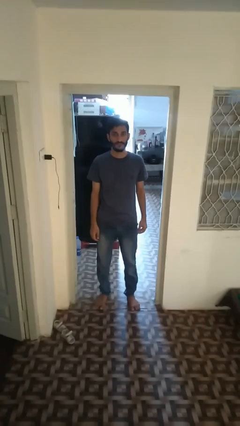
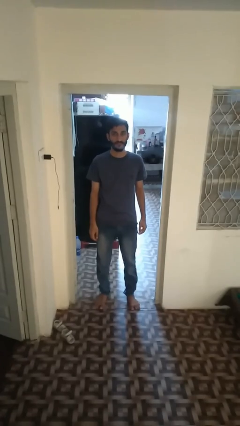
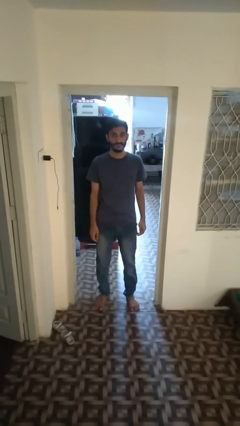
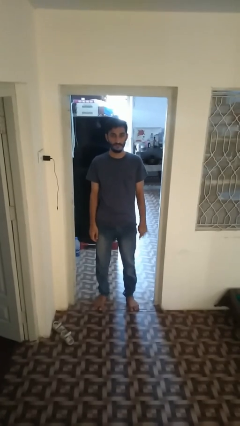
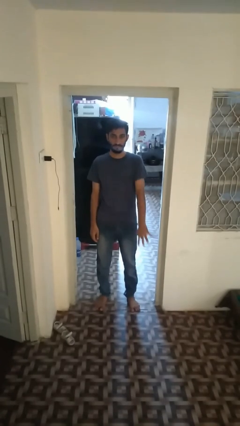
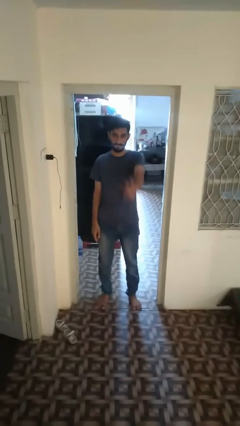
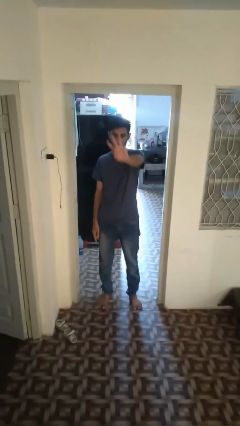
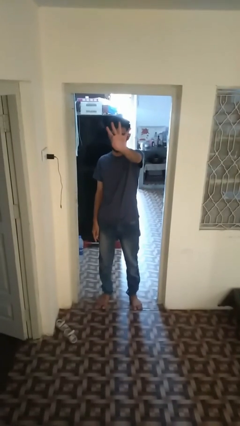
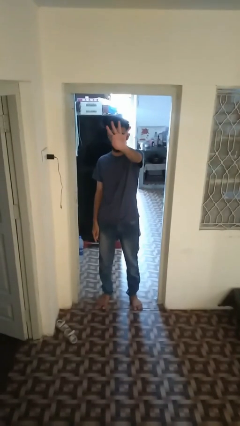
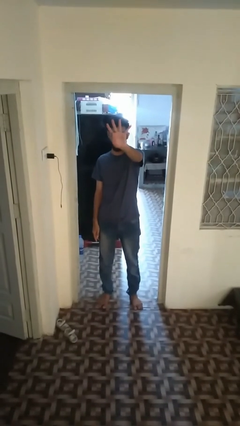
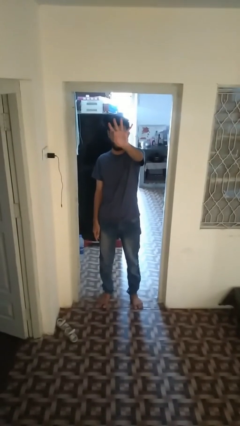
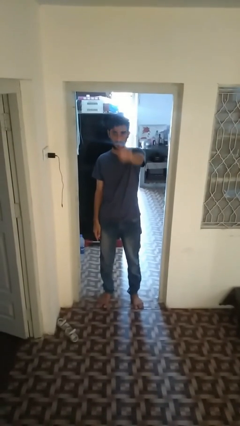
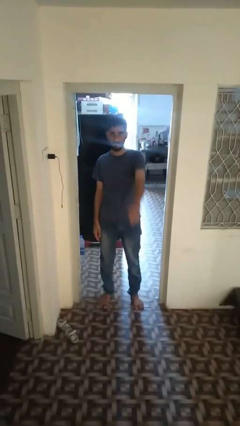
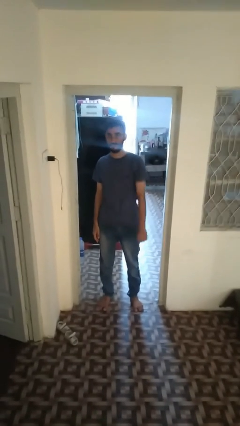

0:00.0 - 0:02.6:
person gestures number four

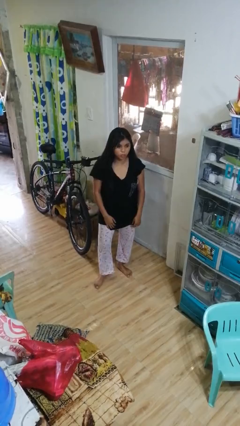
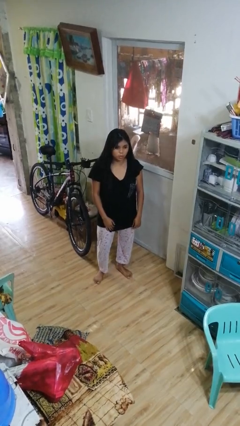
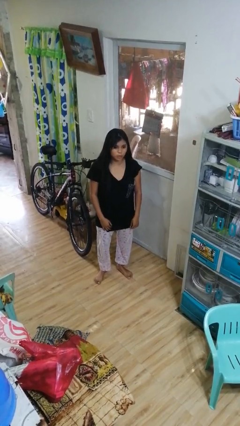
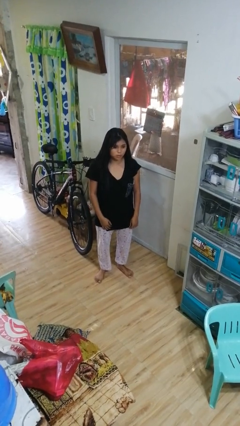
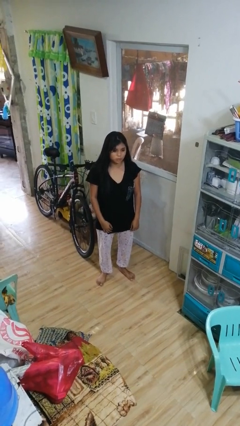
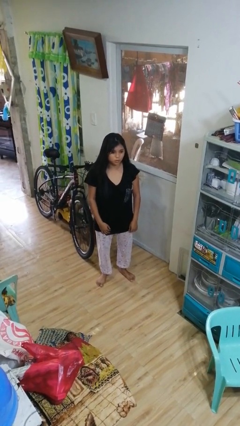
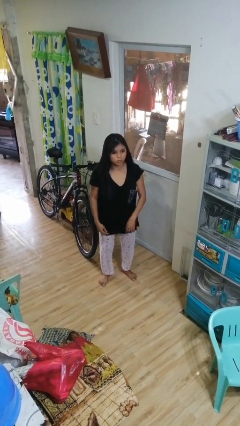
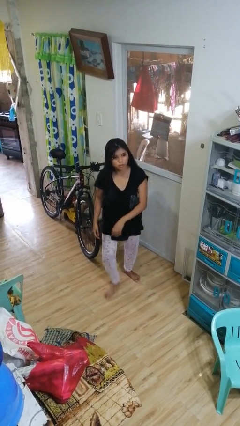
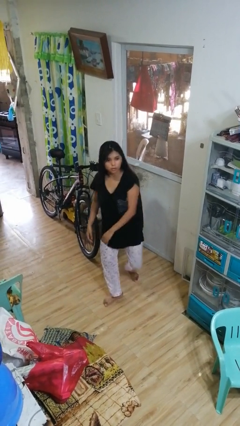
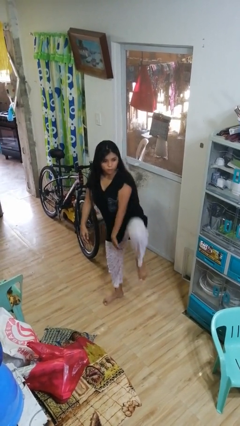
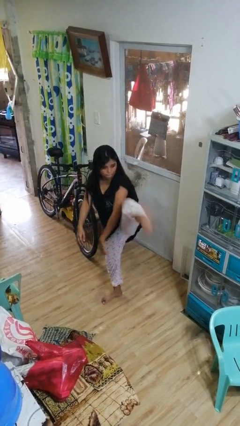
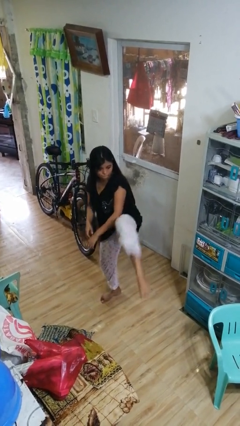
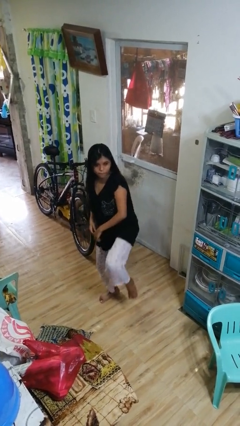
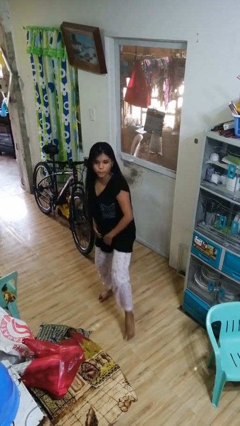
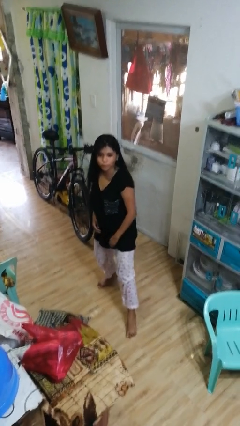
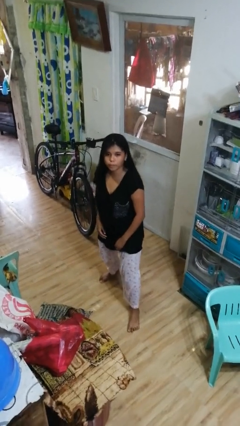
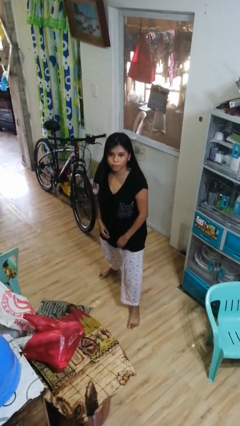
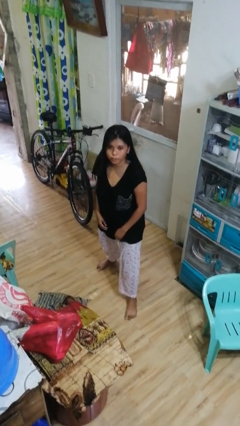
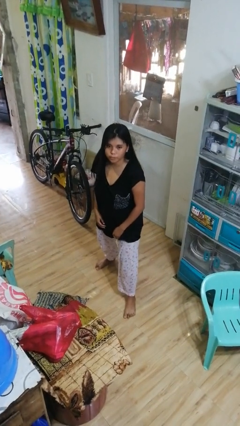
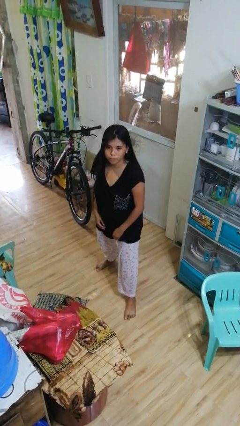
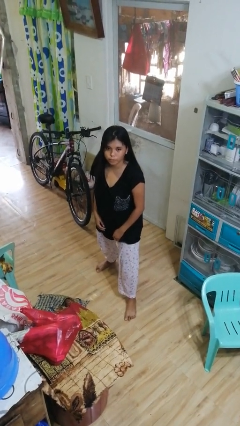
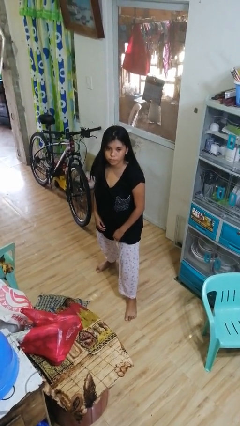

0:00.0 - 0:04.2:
person karate kicks

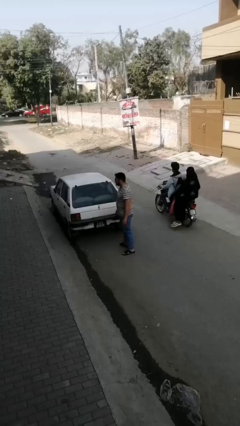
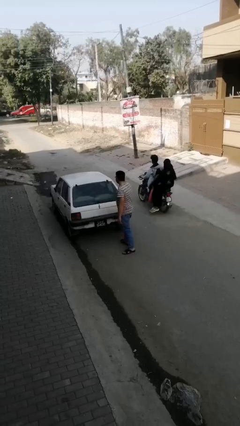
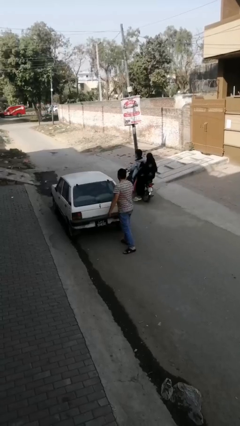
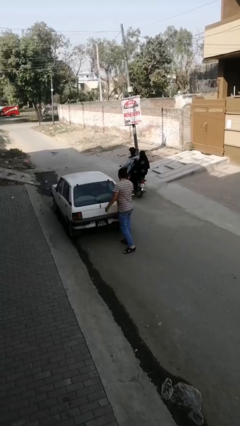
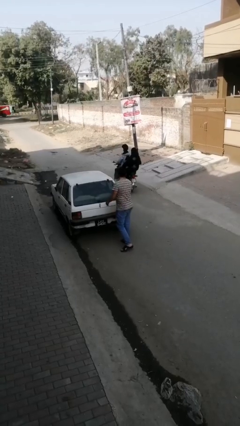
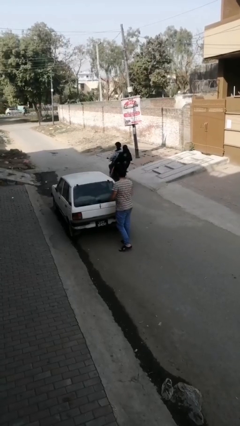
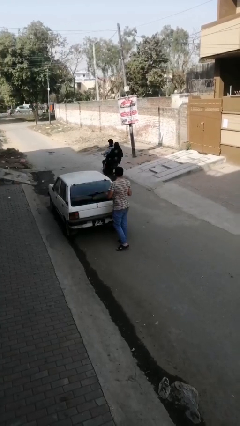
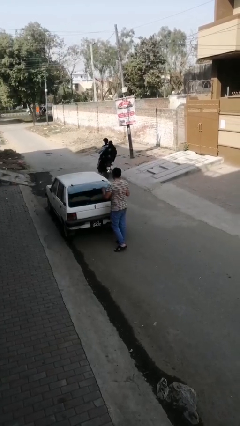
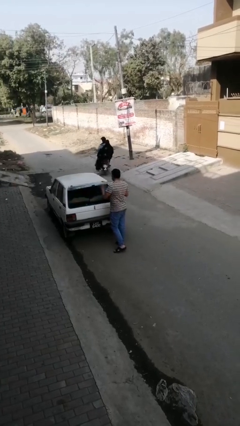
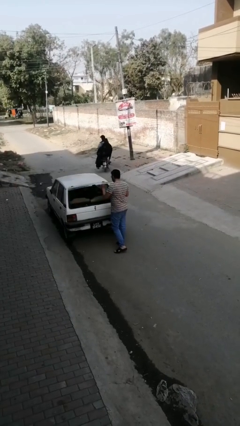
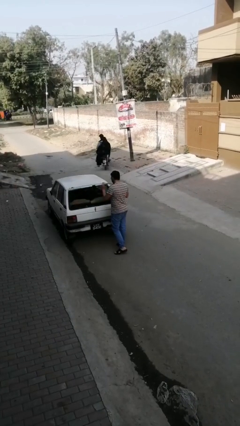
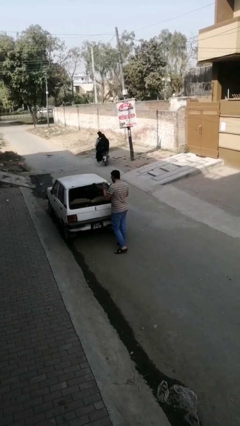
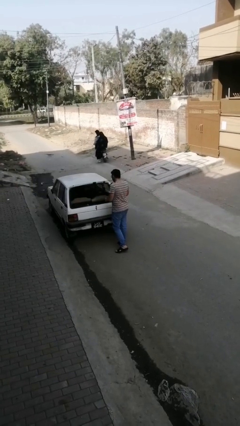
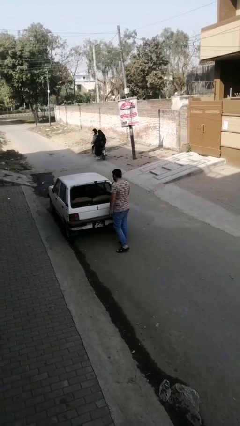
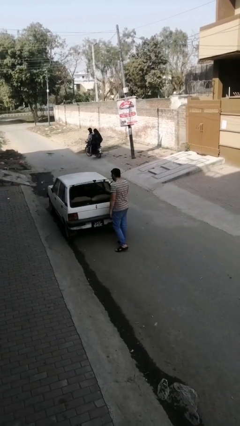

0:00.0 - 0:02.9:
person opens car trunk

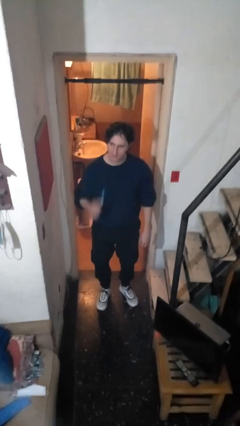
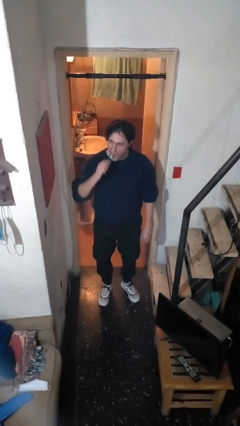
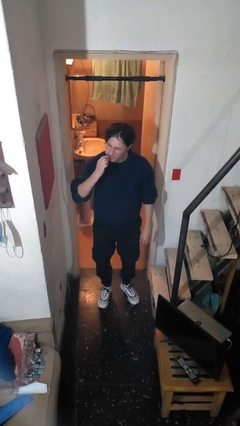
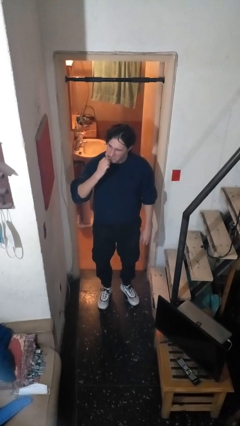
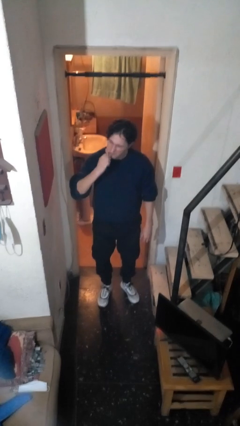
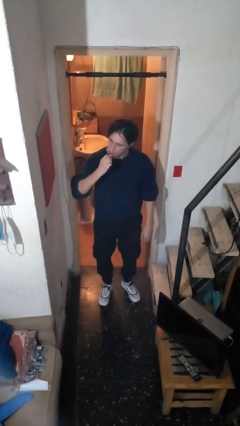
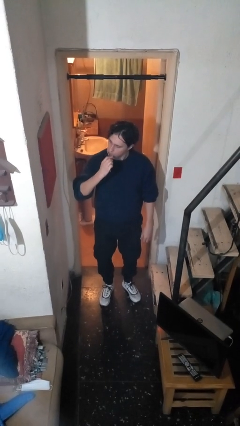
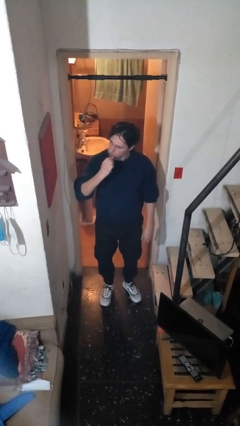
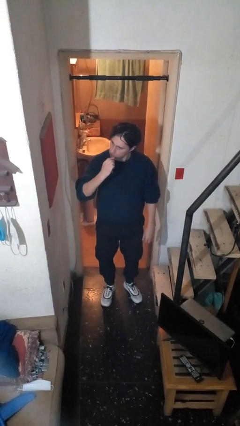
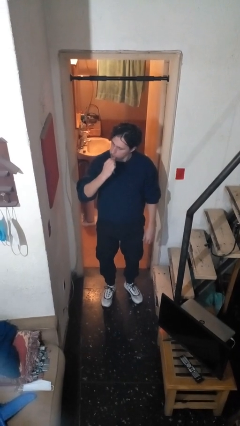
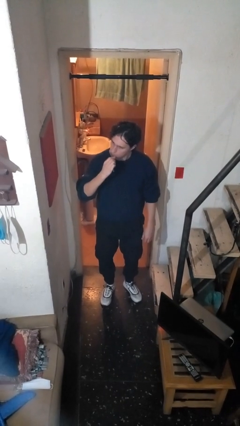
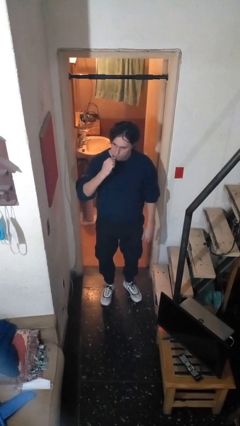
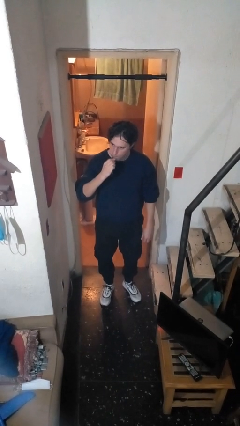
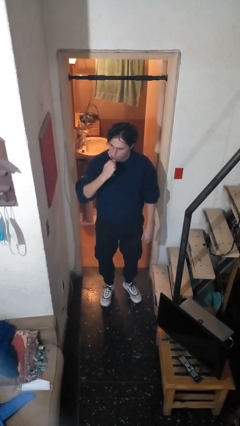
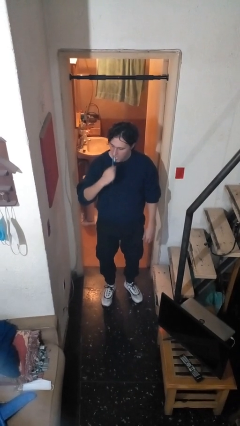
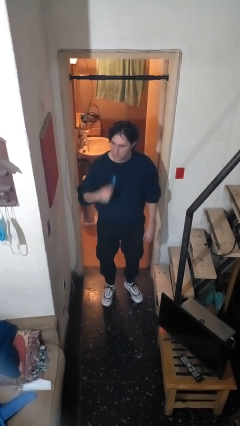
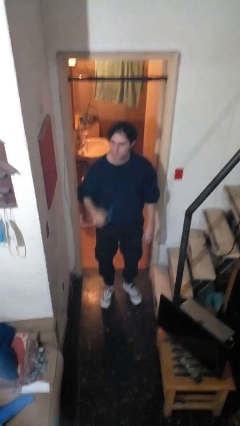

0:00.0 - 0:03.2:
person brushes teeth

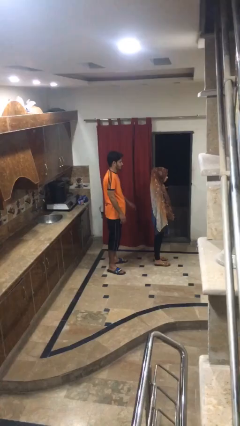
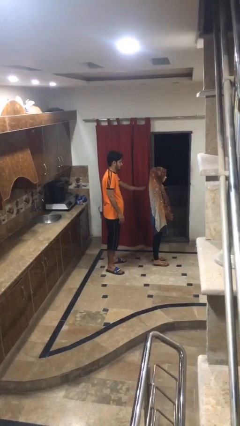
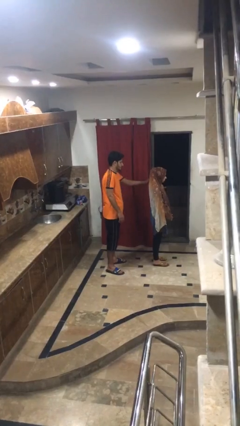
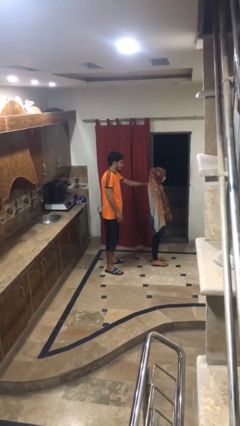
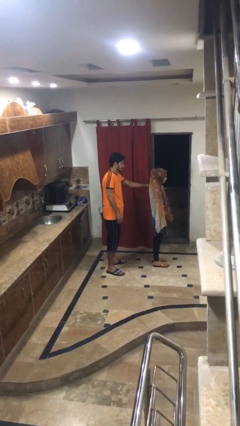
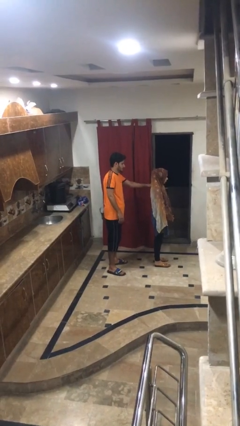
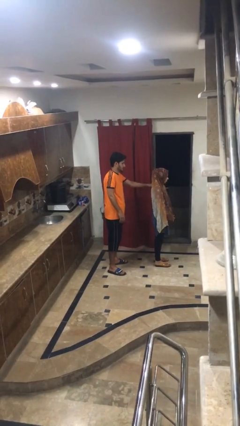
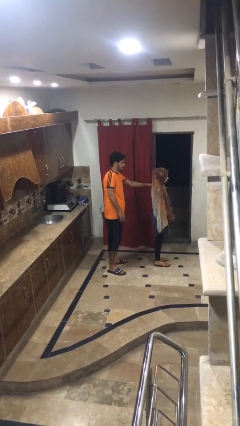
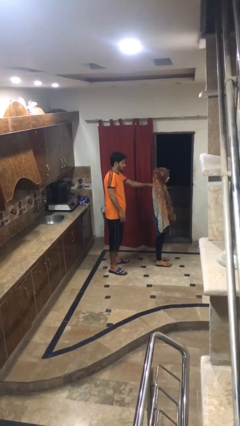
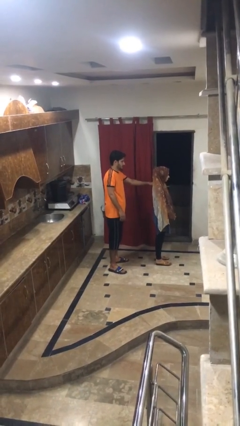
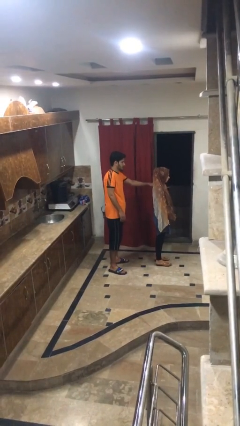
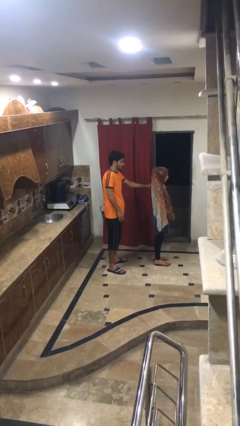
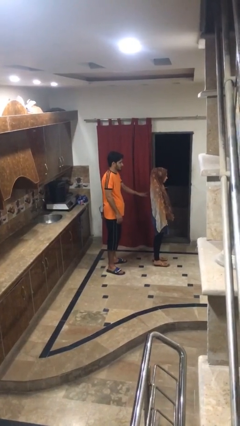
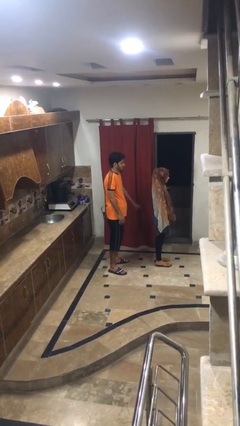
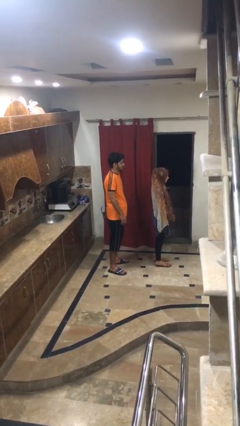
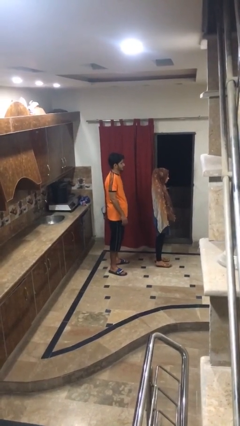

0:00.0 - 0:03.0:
person touches back of person

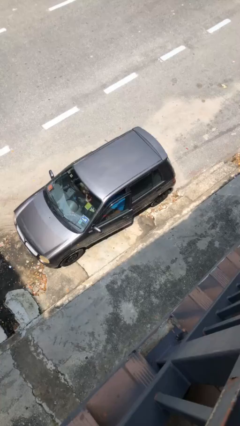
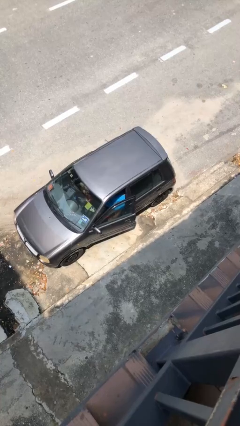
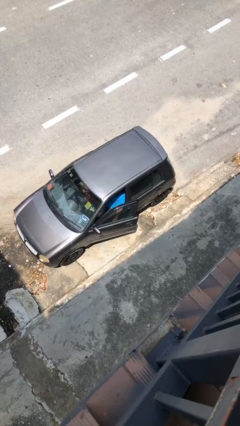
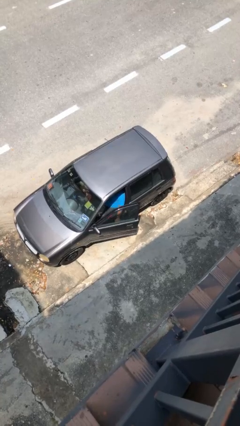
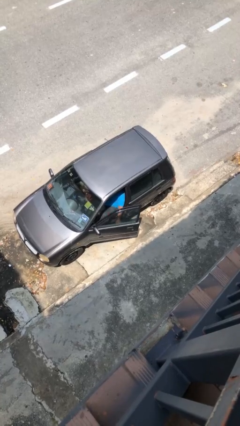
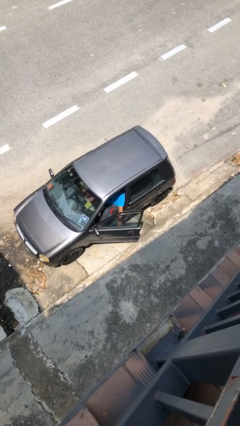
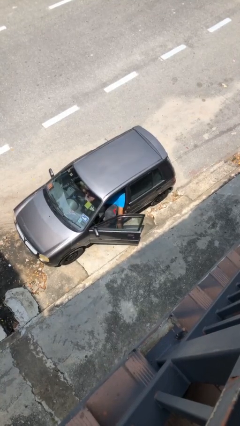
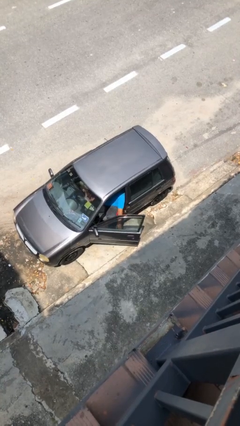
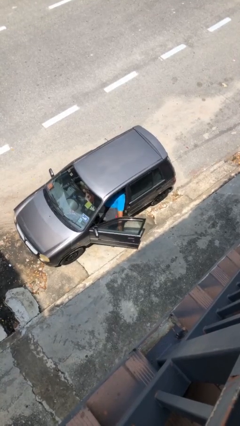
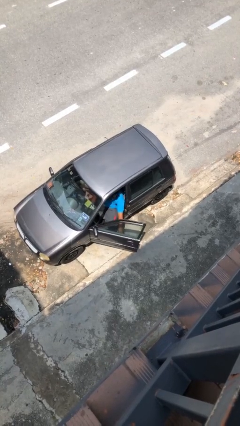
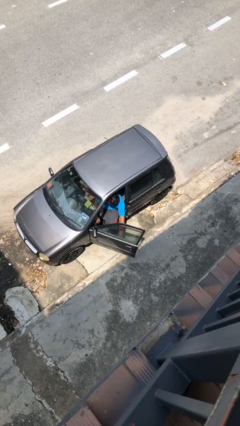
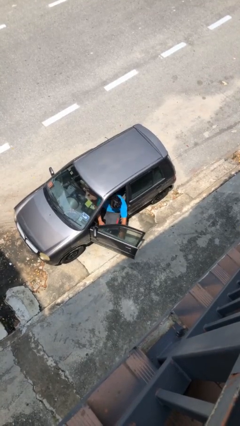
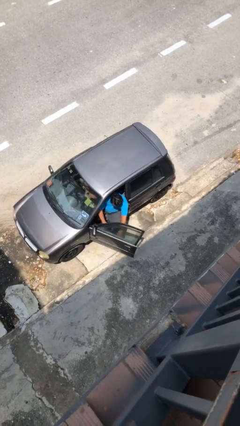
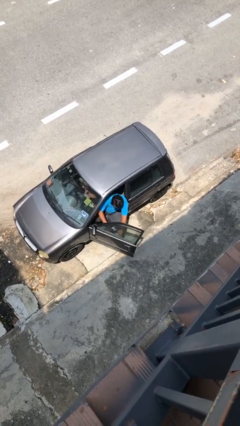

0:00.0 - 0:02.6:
person opens car door
